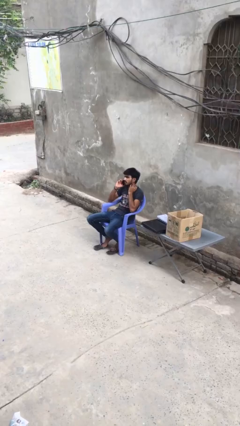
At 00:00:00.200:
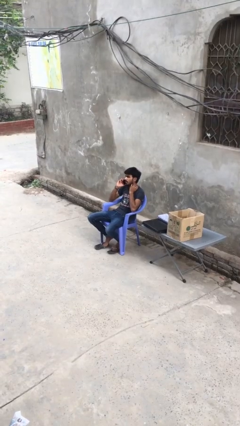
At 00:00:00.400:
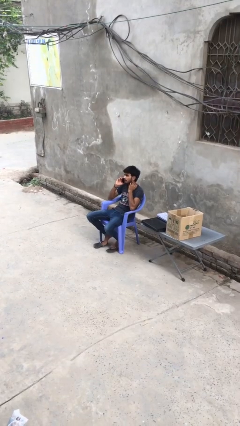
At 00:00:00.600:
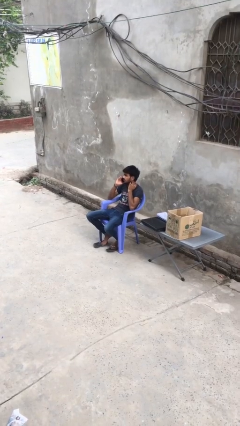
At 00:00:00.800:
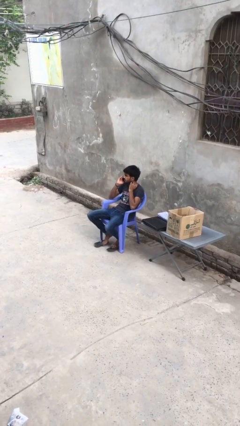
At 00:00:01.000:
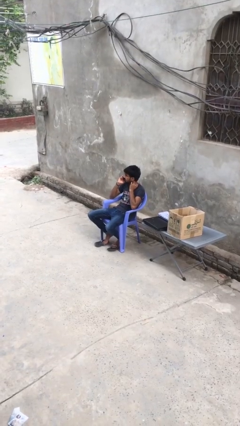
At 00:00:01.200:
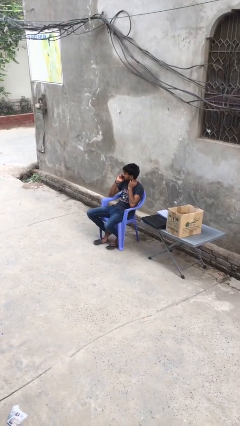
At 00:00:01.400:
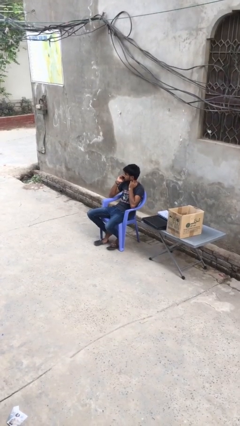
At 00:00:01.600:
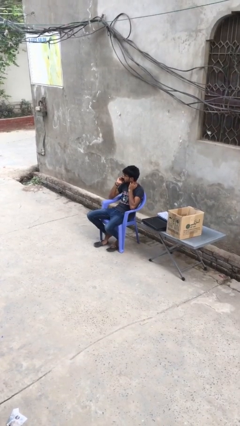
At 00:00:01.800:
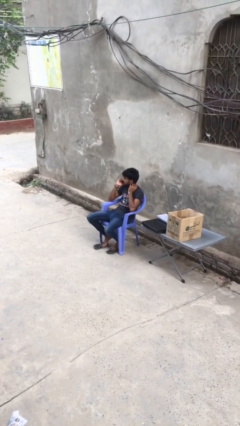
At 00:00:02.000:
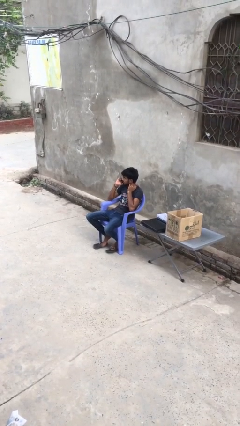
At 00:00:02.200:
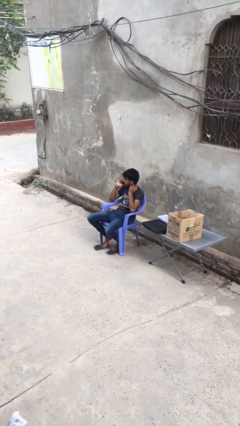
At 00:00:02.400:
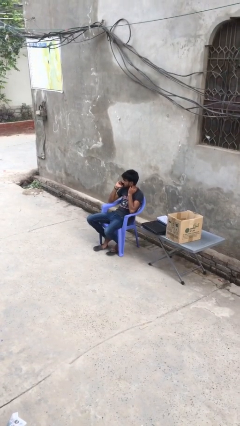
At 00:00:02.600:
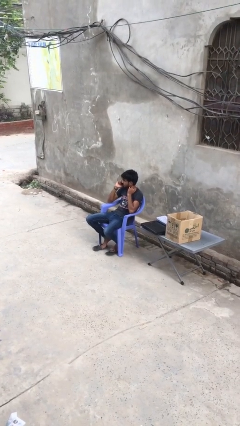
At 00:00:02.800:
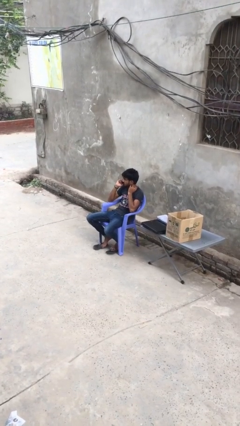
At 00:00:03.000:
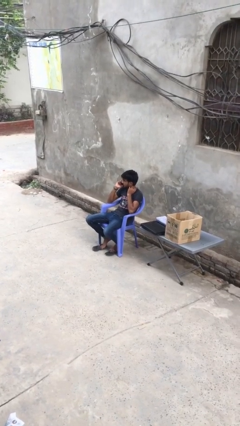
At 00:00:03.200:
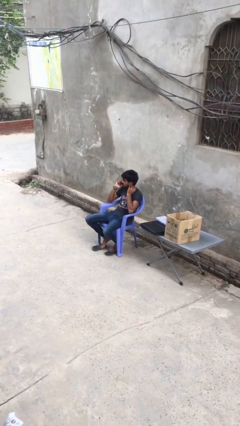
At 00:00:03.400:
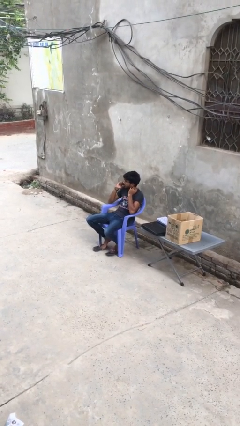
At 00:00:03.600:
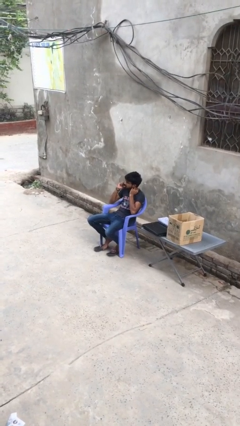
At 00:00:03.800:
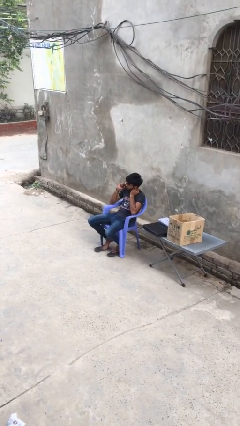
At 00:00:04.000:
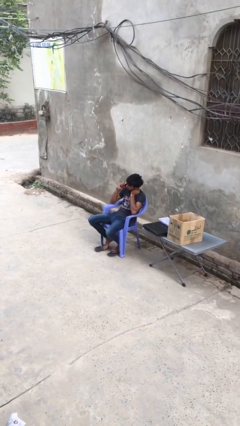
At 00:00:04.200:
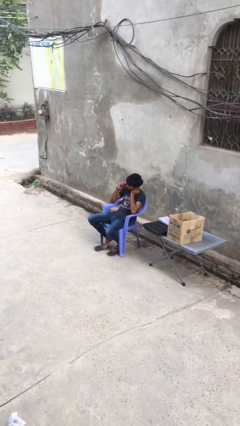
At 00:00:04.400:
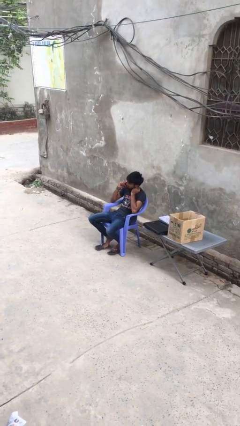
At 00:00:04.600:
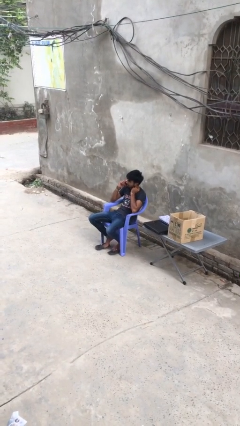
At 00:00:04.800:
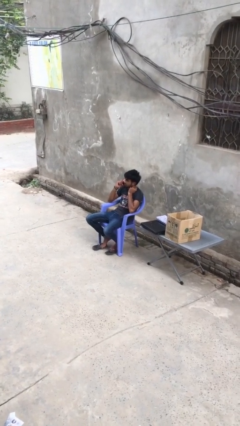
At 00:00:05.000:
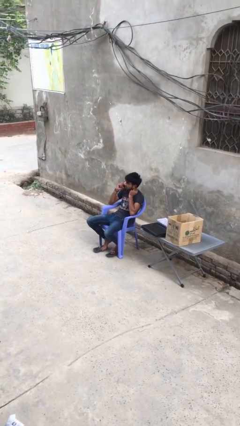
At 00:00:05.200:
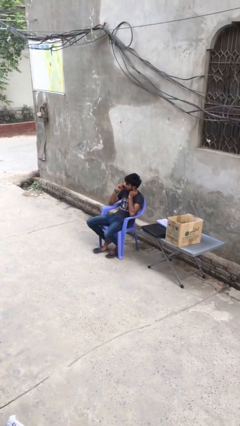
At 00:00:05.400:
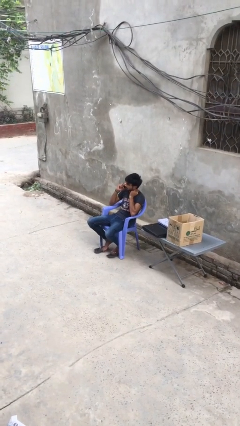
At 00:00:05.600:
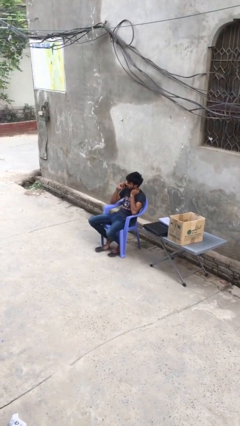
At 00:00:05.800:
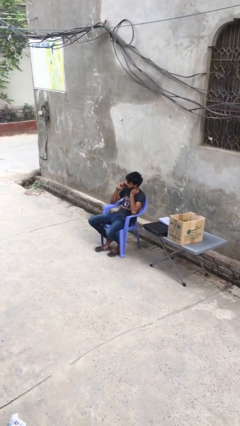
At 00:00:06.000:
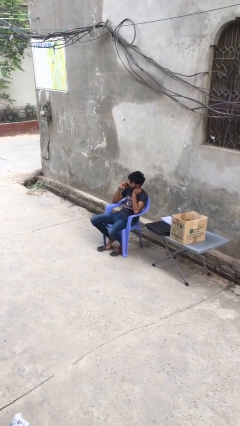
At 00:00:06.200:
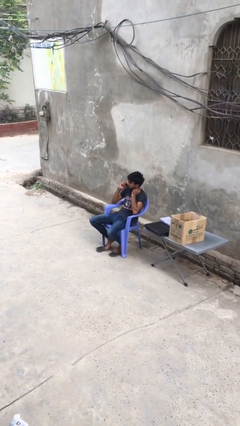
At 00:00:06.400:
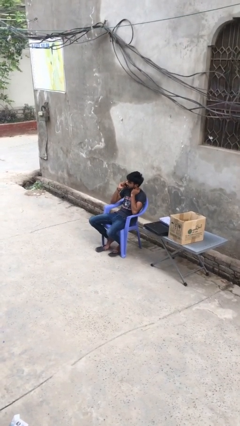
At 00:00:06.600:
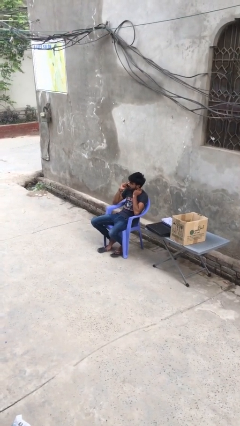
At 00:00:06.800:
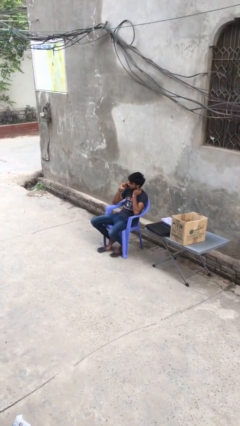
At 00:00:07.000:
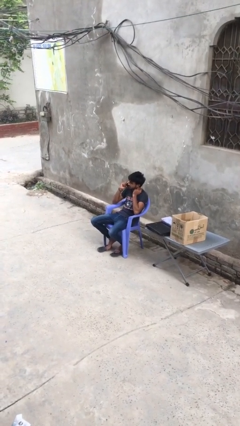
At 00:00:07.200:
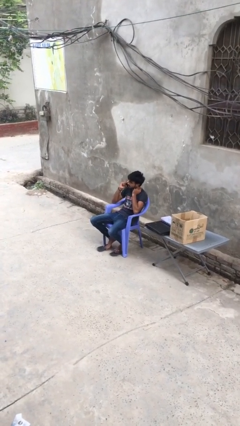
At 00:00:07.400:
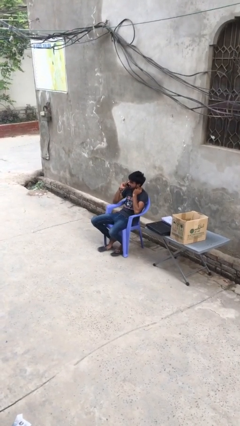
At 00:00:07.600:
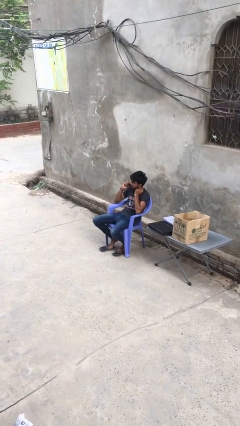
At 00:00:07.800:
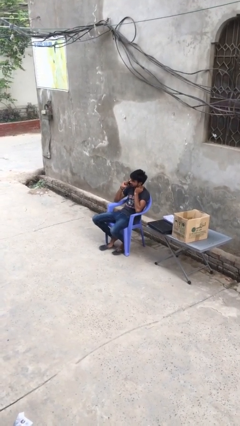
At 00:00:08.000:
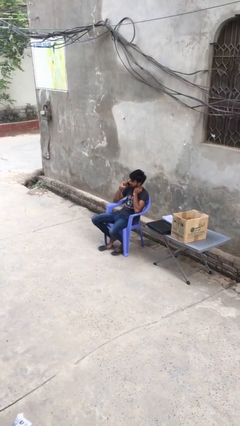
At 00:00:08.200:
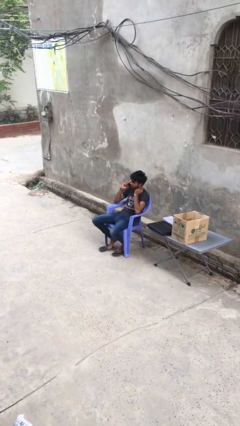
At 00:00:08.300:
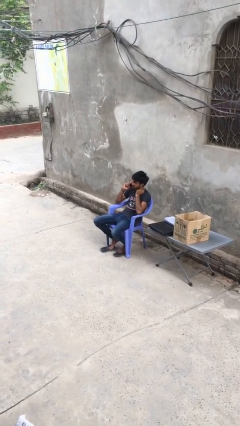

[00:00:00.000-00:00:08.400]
person talks on phone

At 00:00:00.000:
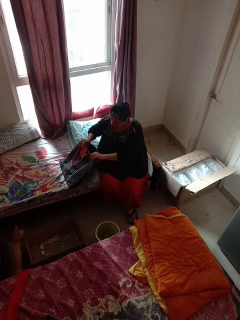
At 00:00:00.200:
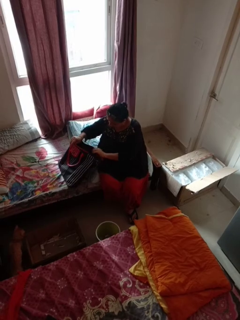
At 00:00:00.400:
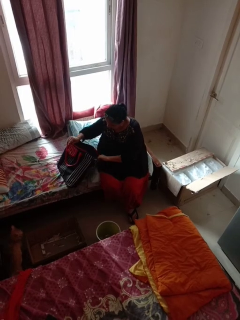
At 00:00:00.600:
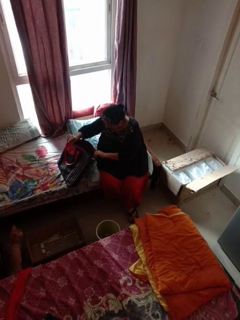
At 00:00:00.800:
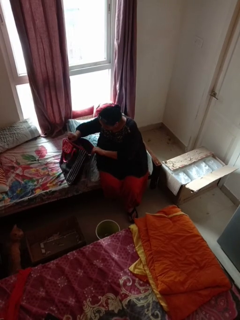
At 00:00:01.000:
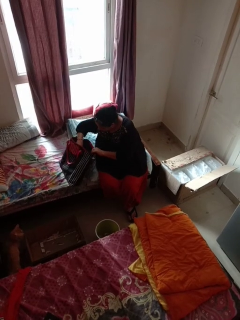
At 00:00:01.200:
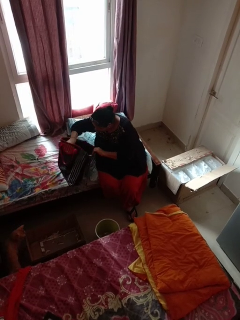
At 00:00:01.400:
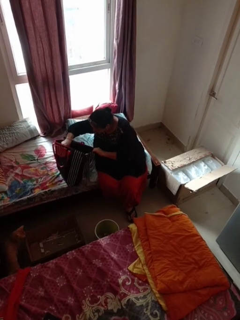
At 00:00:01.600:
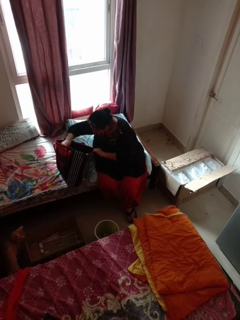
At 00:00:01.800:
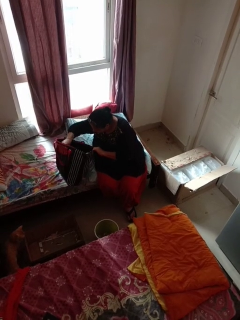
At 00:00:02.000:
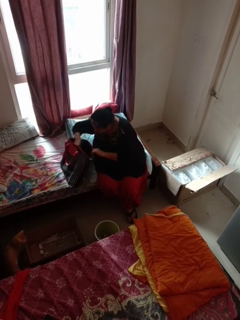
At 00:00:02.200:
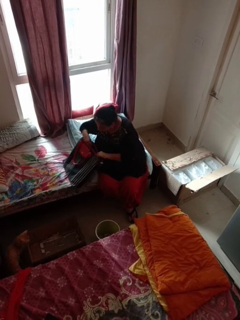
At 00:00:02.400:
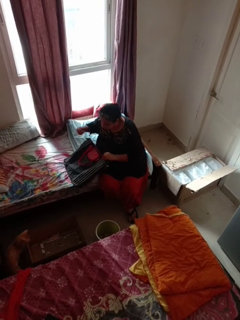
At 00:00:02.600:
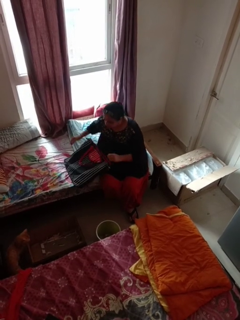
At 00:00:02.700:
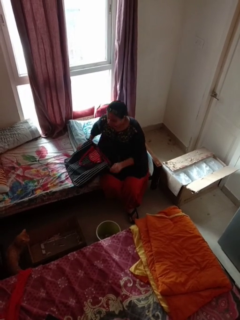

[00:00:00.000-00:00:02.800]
person searches in bag

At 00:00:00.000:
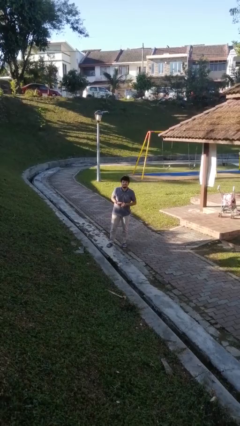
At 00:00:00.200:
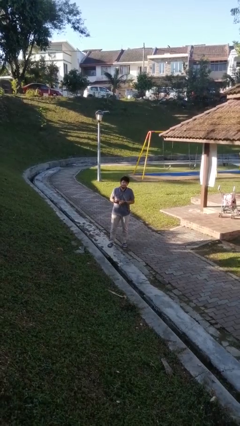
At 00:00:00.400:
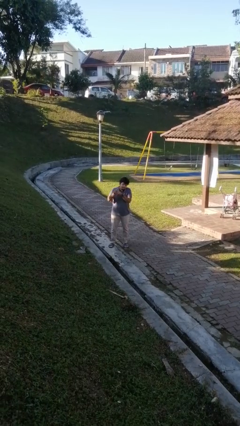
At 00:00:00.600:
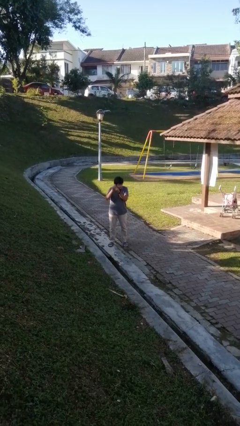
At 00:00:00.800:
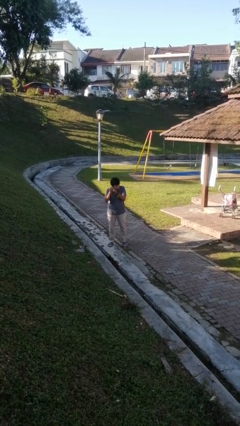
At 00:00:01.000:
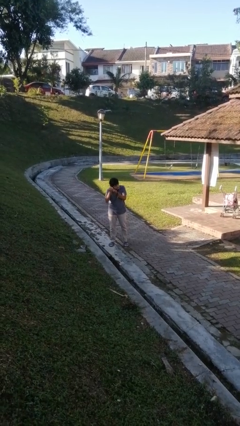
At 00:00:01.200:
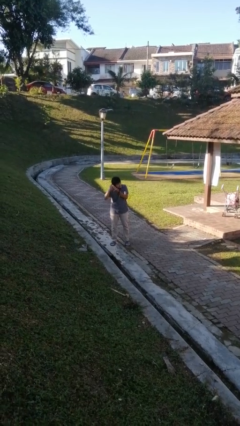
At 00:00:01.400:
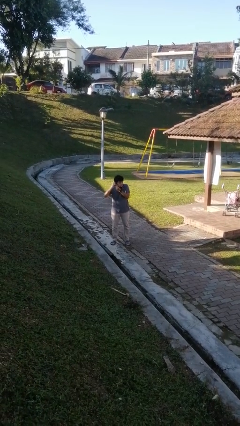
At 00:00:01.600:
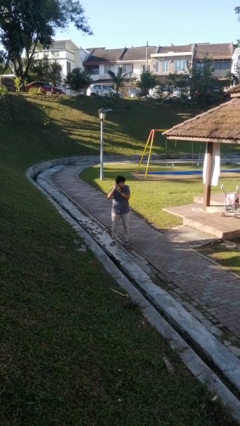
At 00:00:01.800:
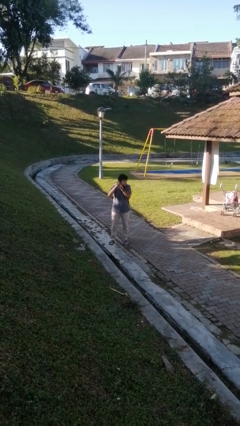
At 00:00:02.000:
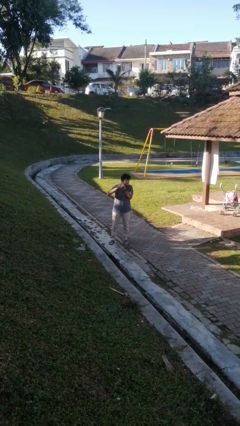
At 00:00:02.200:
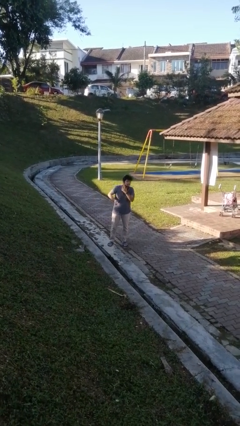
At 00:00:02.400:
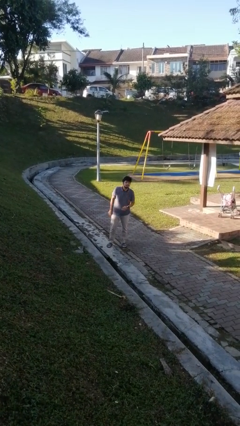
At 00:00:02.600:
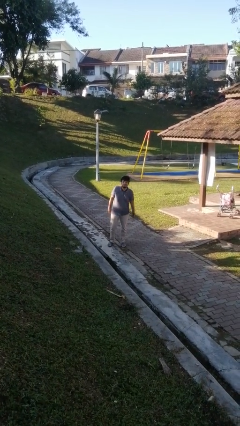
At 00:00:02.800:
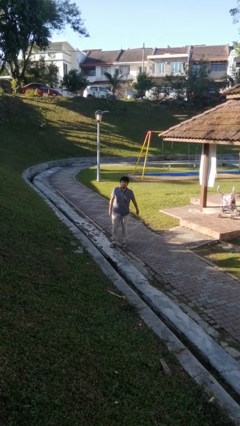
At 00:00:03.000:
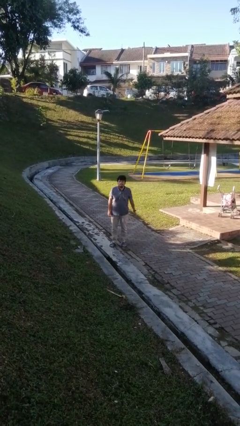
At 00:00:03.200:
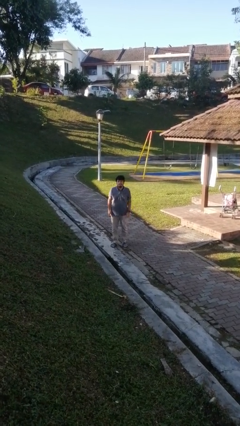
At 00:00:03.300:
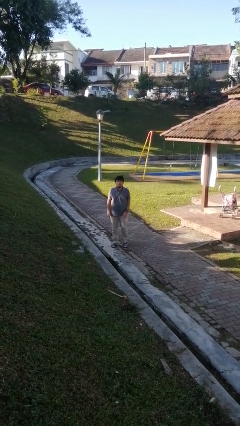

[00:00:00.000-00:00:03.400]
person puts on earrings

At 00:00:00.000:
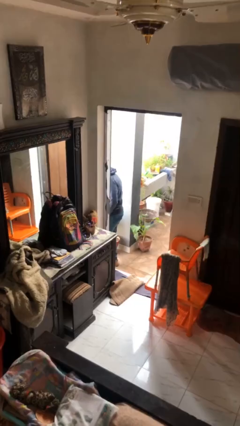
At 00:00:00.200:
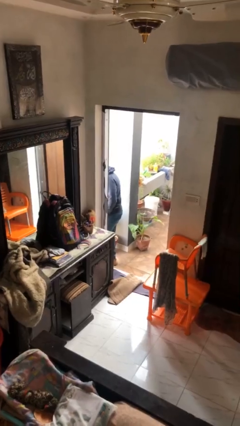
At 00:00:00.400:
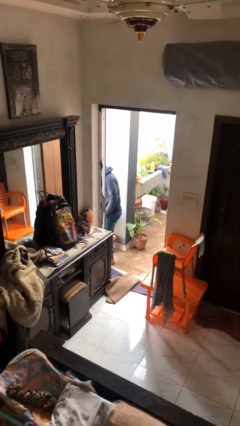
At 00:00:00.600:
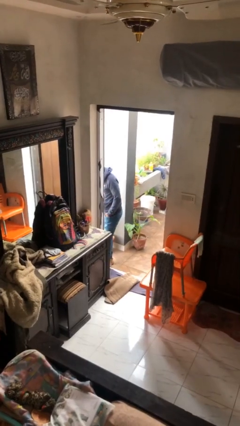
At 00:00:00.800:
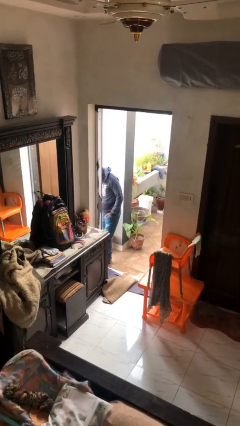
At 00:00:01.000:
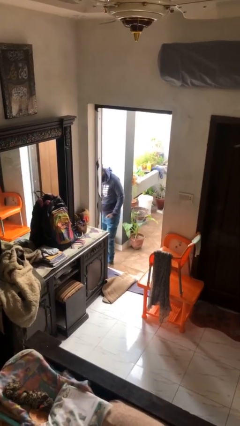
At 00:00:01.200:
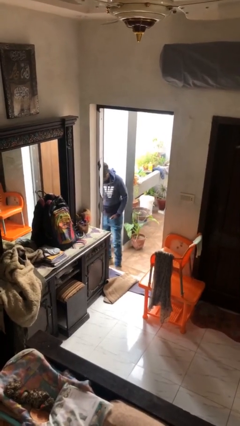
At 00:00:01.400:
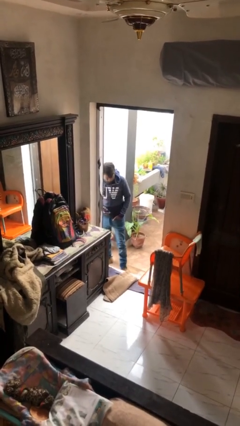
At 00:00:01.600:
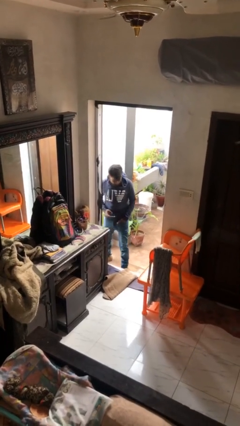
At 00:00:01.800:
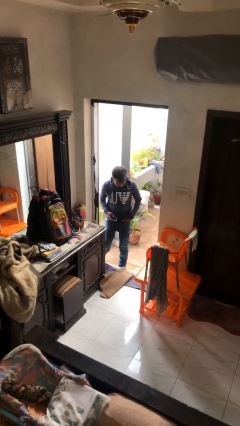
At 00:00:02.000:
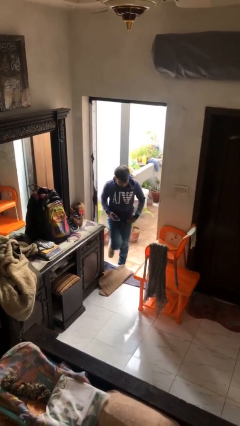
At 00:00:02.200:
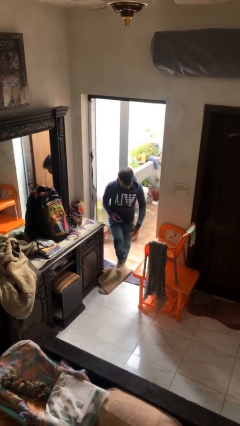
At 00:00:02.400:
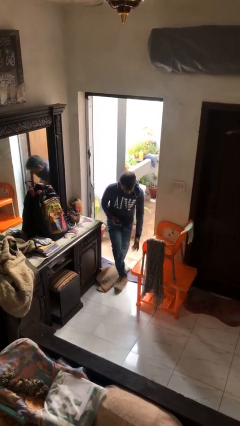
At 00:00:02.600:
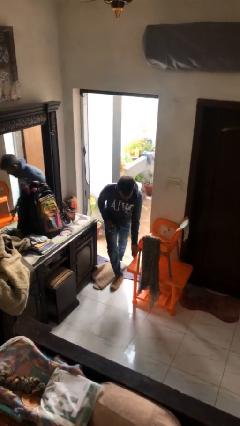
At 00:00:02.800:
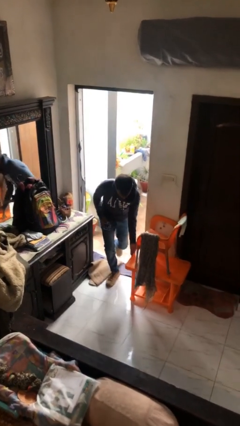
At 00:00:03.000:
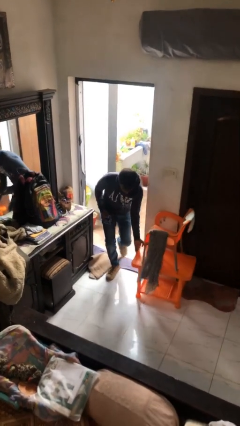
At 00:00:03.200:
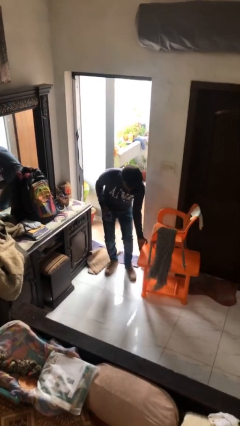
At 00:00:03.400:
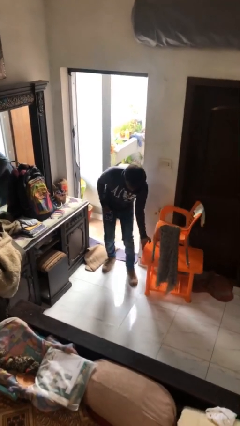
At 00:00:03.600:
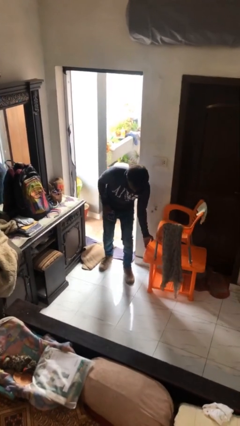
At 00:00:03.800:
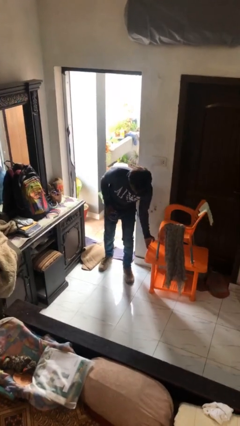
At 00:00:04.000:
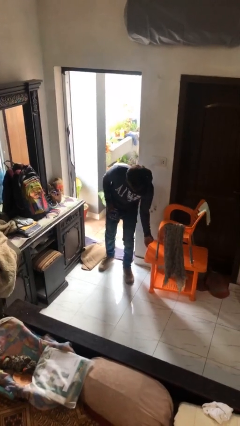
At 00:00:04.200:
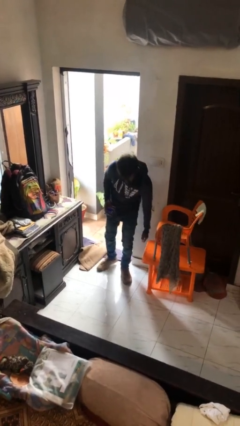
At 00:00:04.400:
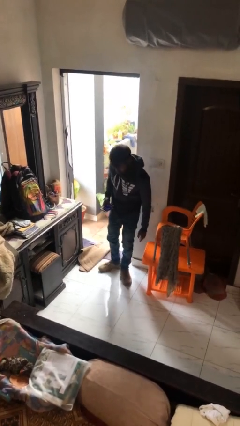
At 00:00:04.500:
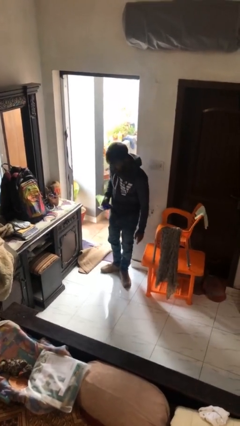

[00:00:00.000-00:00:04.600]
person enters scene through structure
